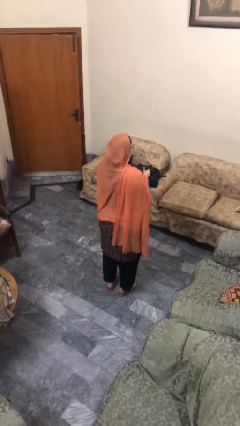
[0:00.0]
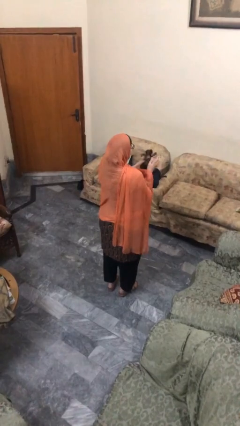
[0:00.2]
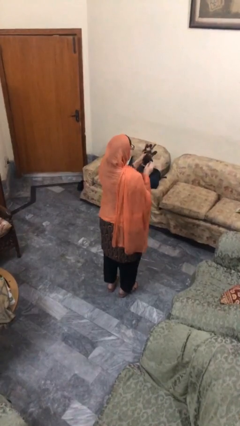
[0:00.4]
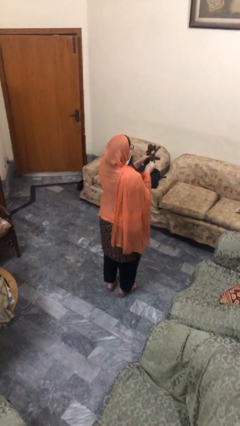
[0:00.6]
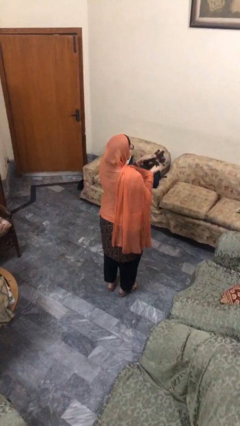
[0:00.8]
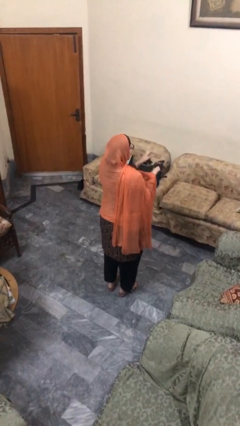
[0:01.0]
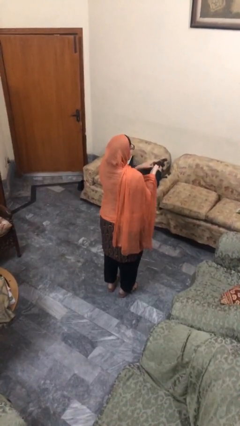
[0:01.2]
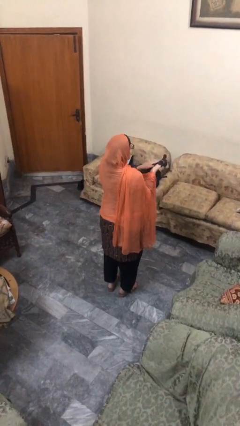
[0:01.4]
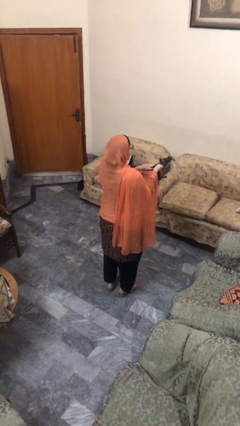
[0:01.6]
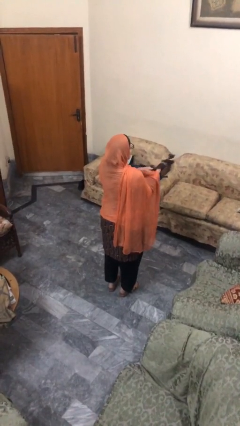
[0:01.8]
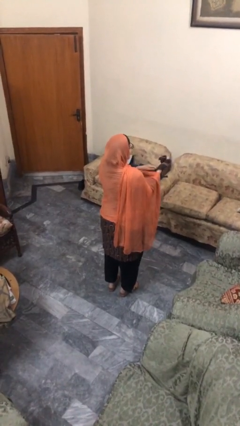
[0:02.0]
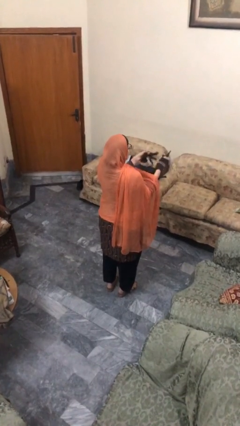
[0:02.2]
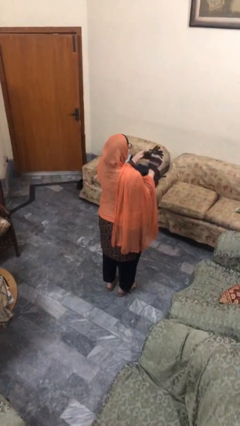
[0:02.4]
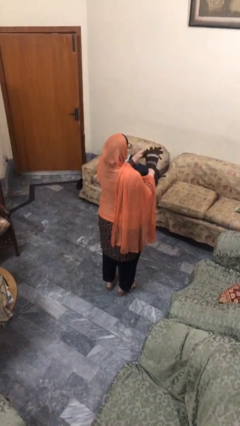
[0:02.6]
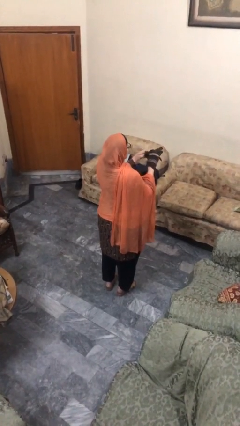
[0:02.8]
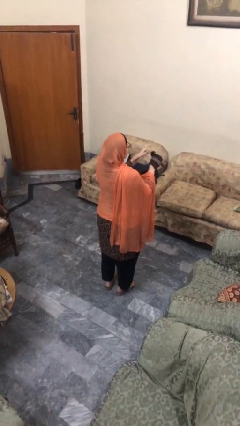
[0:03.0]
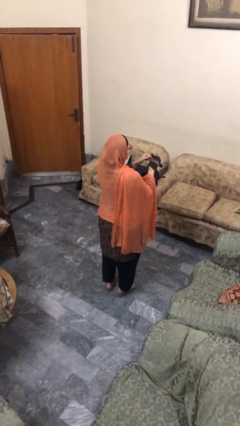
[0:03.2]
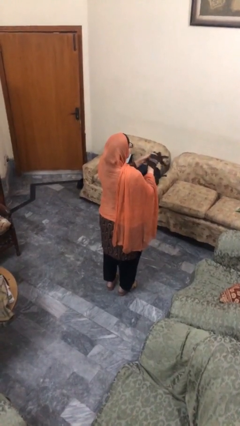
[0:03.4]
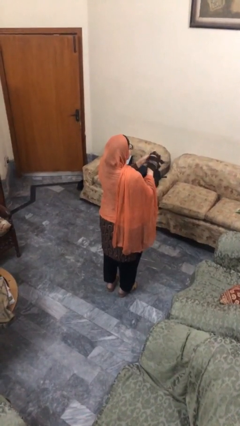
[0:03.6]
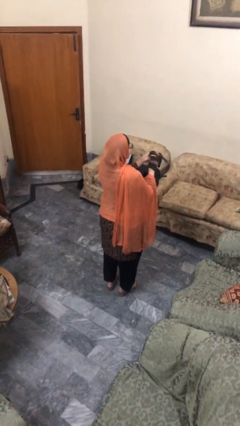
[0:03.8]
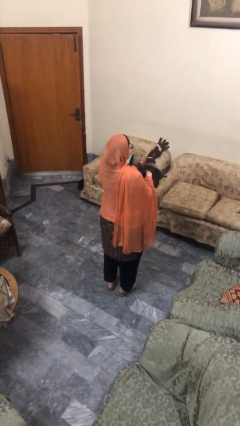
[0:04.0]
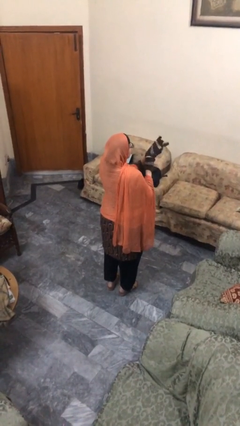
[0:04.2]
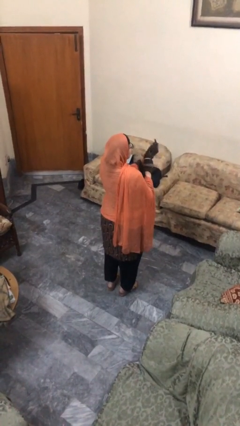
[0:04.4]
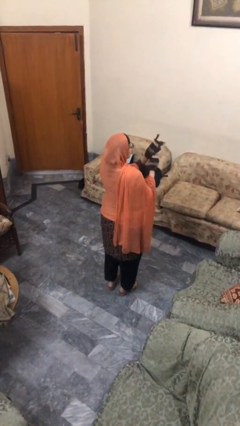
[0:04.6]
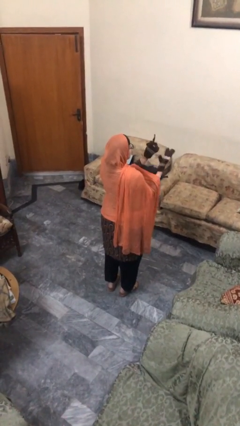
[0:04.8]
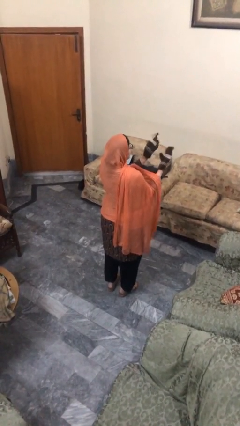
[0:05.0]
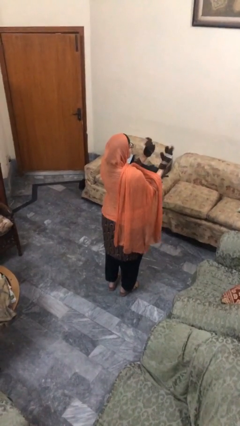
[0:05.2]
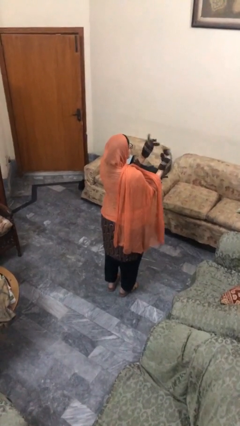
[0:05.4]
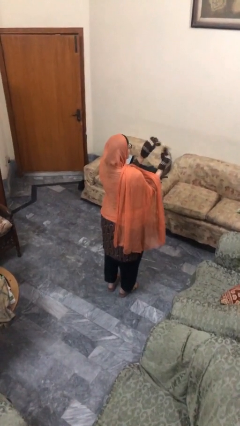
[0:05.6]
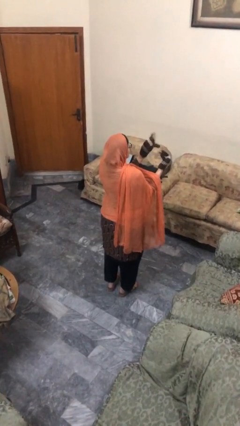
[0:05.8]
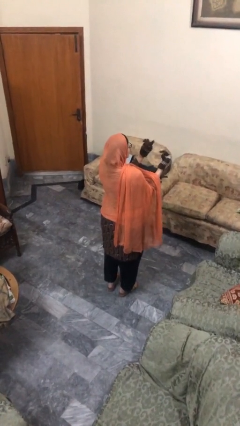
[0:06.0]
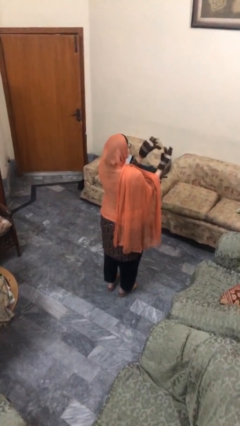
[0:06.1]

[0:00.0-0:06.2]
person puts on gloves

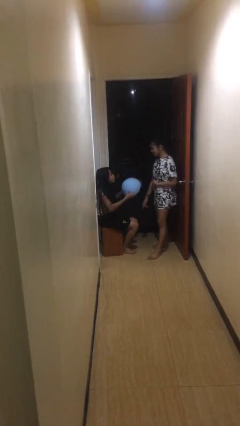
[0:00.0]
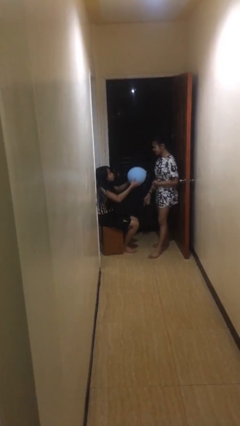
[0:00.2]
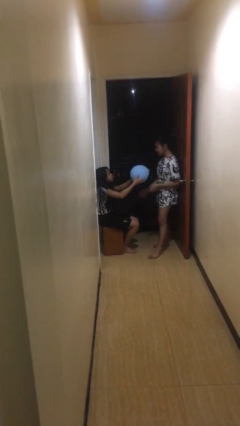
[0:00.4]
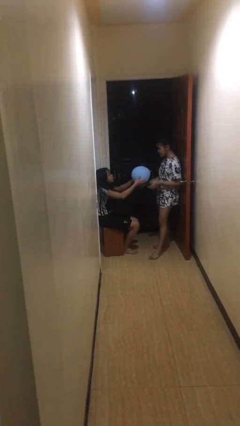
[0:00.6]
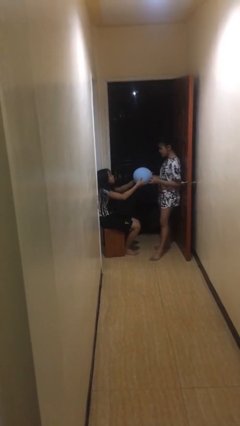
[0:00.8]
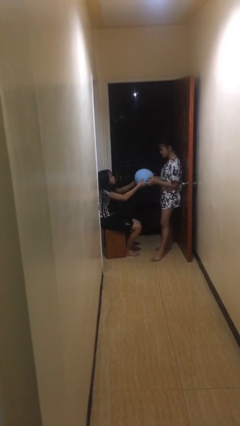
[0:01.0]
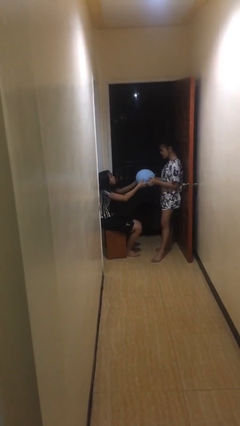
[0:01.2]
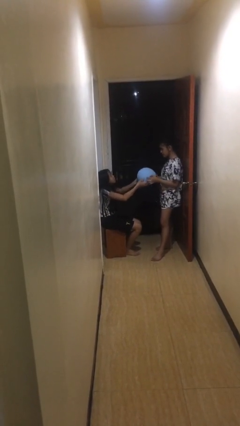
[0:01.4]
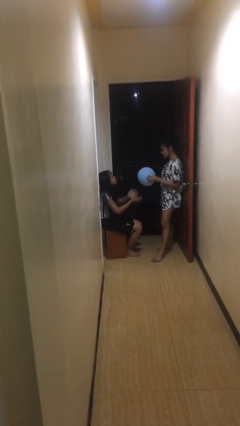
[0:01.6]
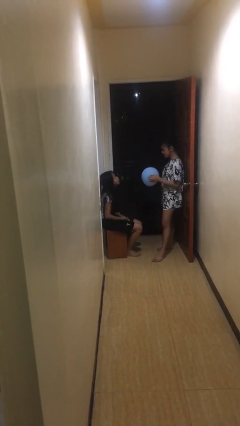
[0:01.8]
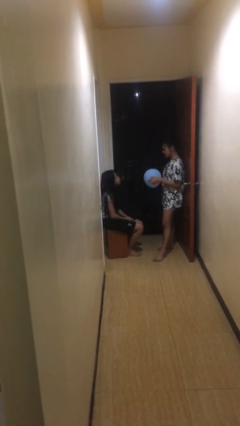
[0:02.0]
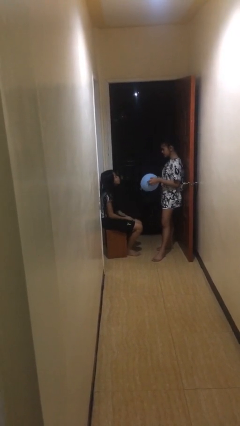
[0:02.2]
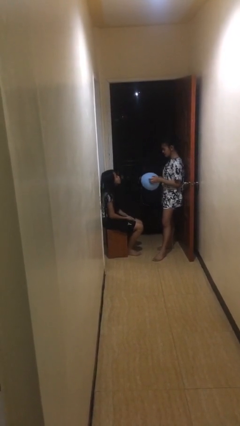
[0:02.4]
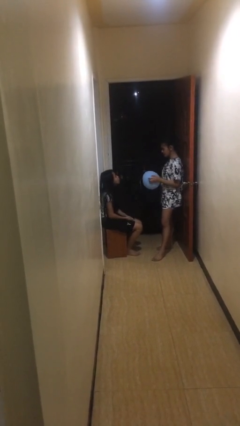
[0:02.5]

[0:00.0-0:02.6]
person transfers object to person

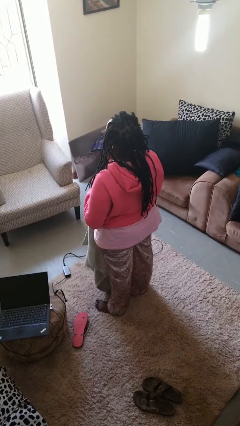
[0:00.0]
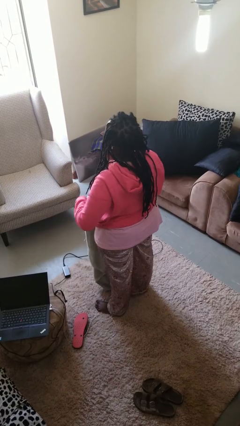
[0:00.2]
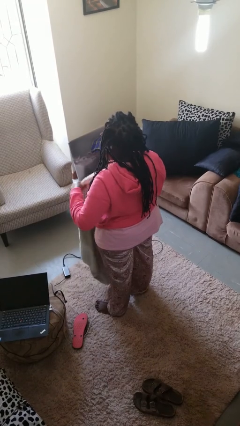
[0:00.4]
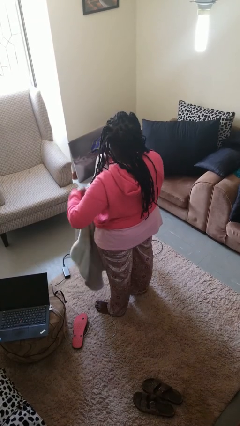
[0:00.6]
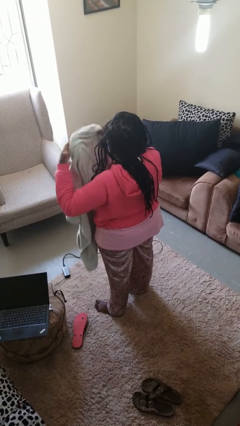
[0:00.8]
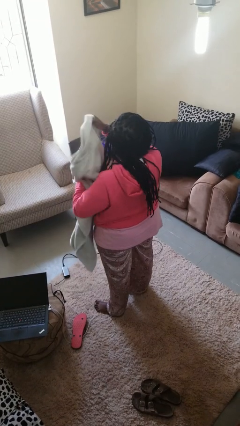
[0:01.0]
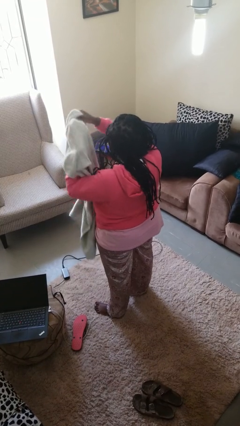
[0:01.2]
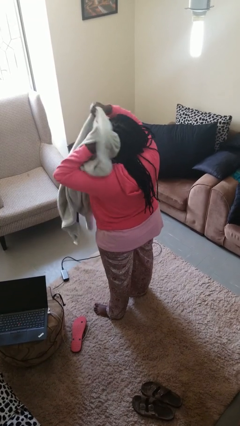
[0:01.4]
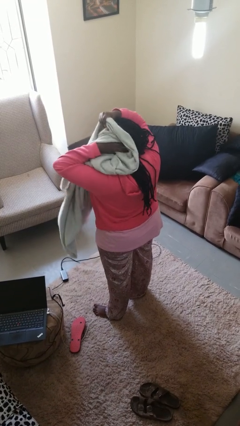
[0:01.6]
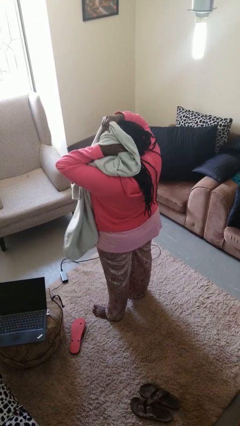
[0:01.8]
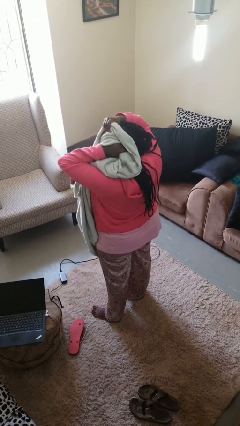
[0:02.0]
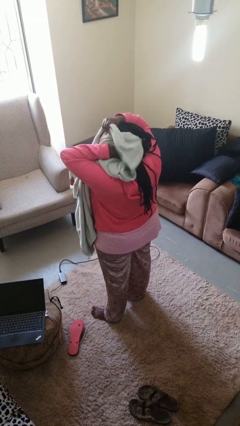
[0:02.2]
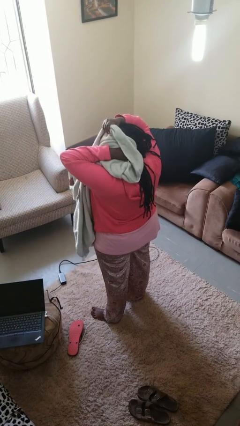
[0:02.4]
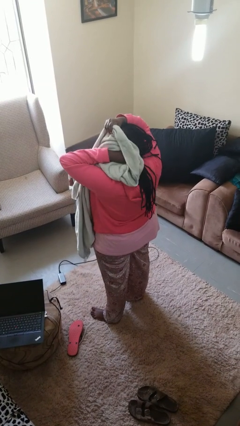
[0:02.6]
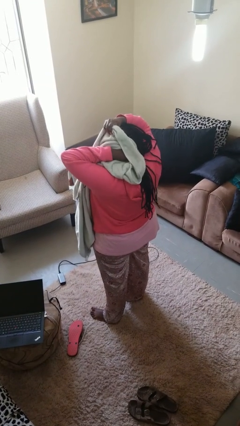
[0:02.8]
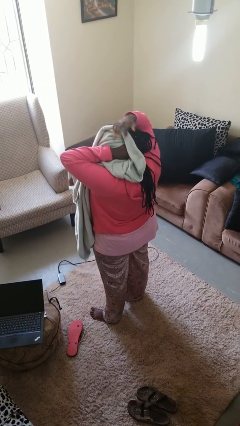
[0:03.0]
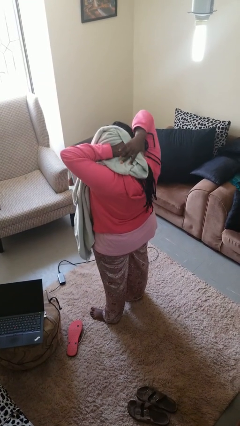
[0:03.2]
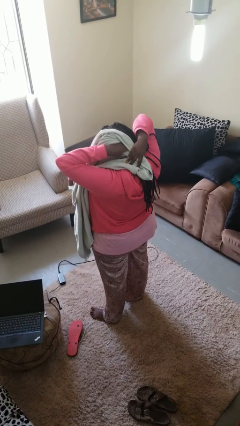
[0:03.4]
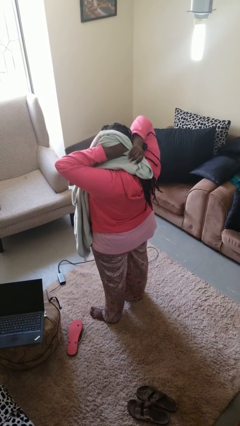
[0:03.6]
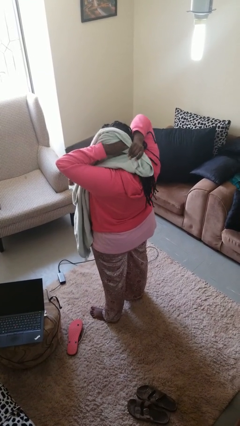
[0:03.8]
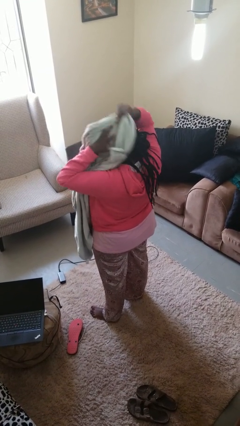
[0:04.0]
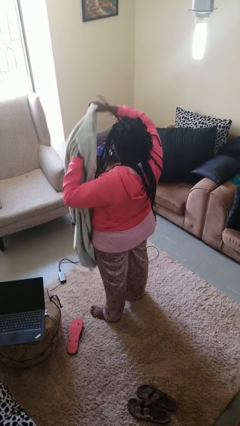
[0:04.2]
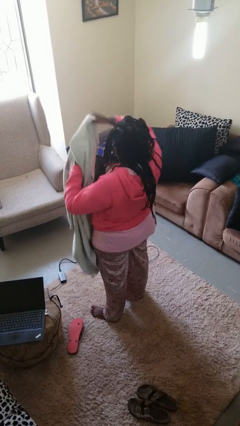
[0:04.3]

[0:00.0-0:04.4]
person dries hair with towel

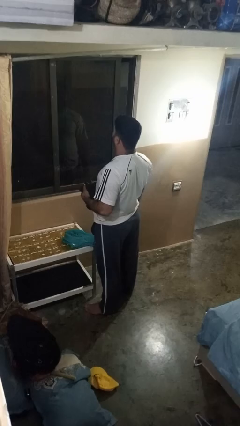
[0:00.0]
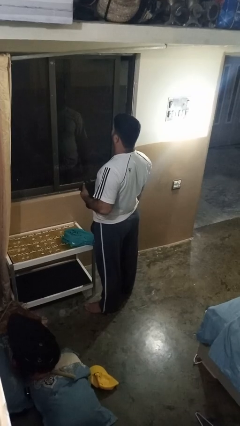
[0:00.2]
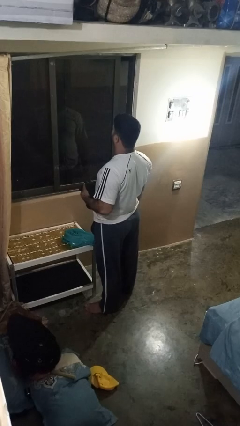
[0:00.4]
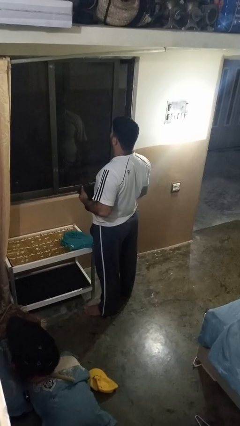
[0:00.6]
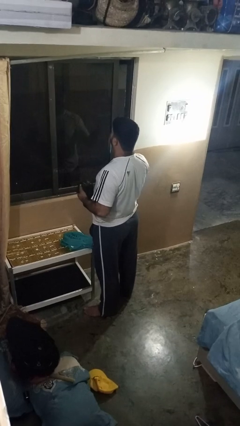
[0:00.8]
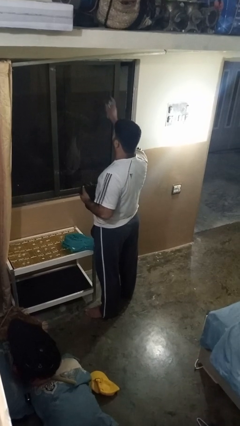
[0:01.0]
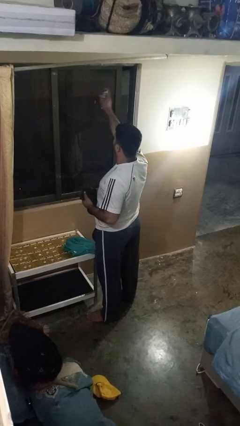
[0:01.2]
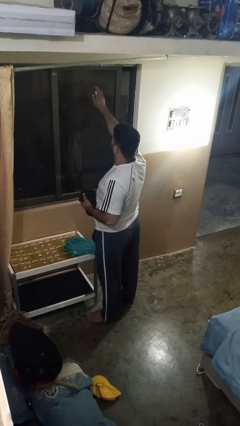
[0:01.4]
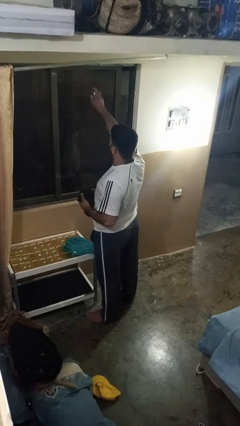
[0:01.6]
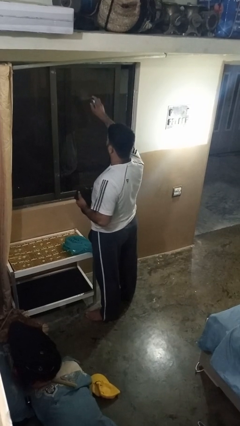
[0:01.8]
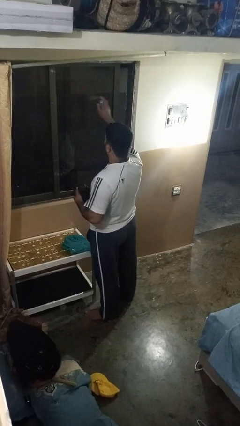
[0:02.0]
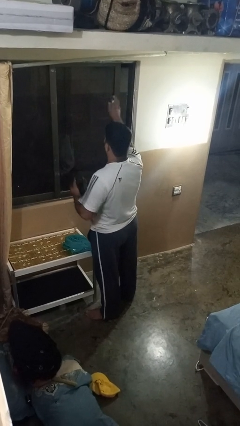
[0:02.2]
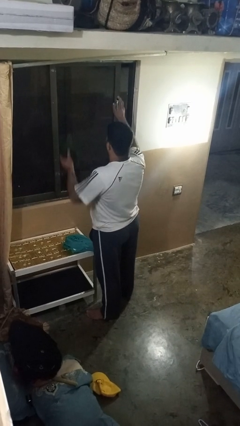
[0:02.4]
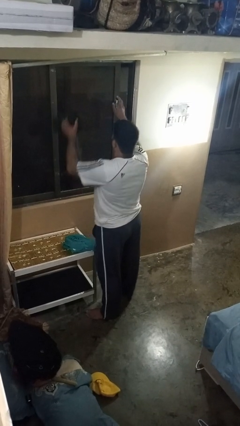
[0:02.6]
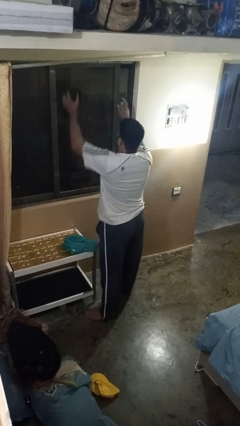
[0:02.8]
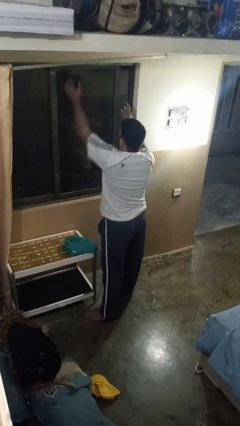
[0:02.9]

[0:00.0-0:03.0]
person sprays from bottle

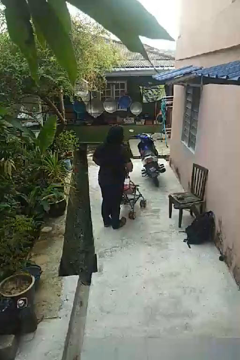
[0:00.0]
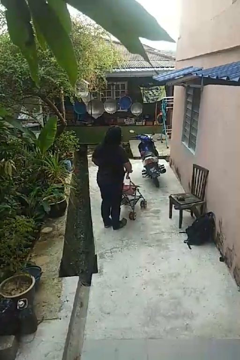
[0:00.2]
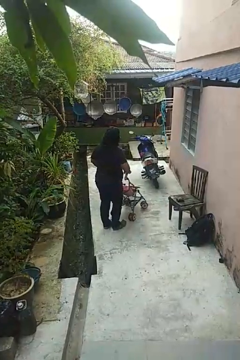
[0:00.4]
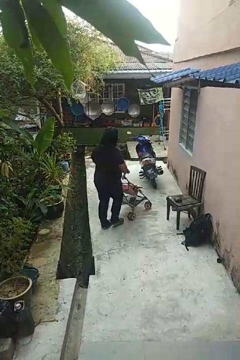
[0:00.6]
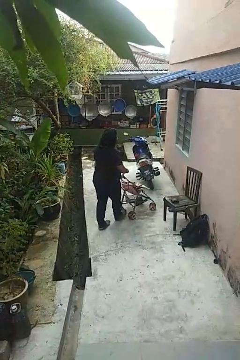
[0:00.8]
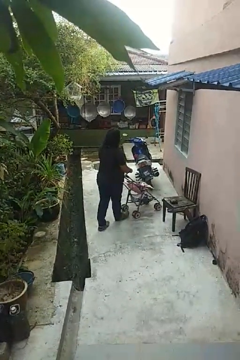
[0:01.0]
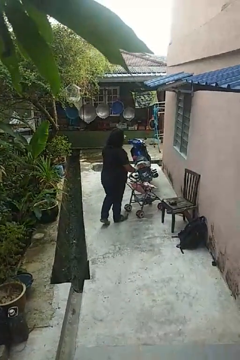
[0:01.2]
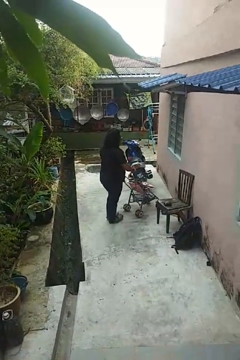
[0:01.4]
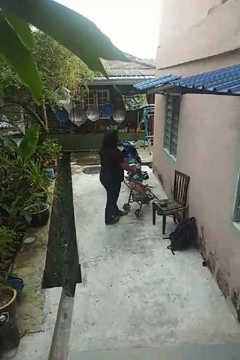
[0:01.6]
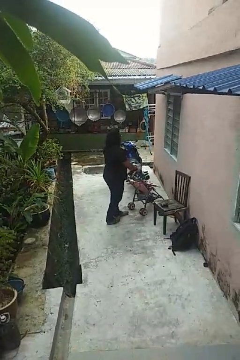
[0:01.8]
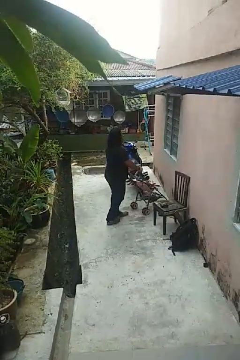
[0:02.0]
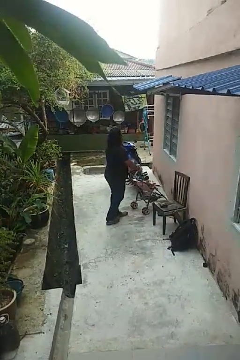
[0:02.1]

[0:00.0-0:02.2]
person pushes wheeled cart
